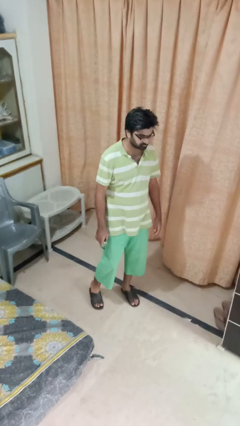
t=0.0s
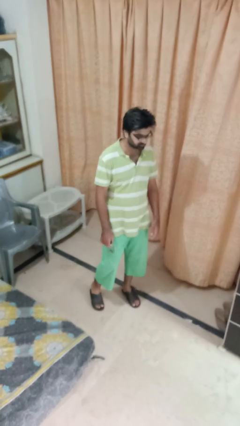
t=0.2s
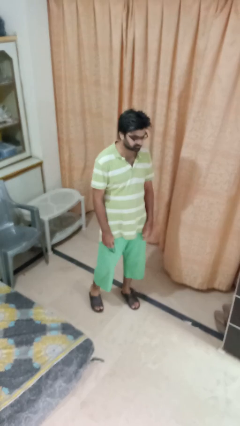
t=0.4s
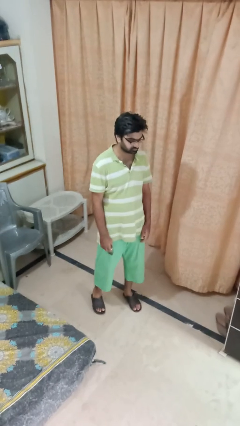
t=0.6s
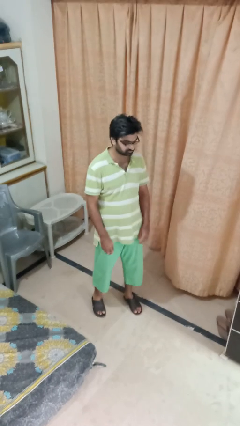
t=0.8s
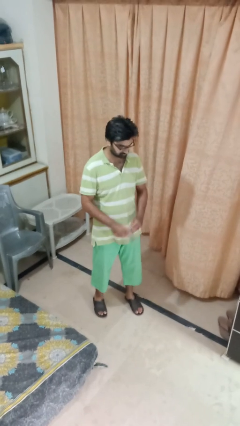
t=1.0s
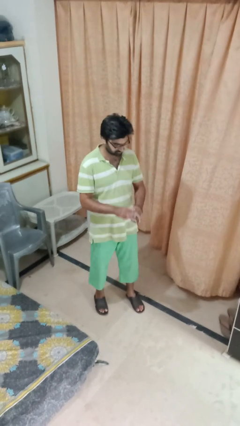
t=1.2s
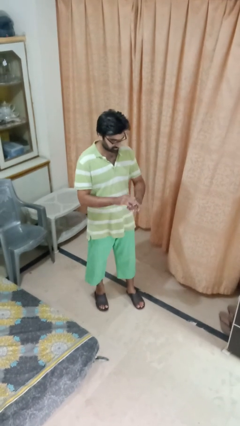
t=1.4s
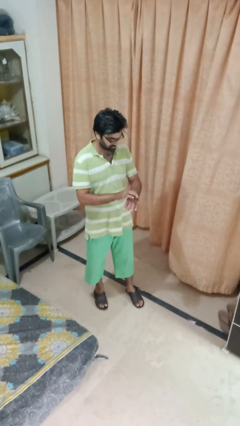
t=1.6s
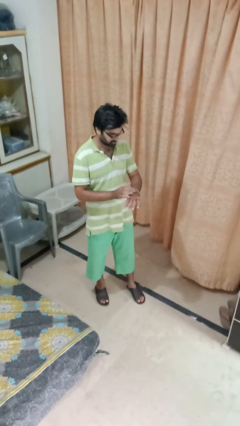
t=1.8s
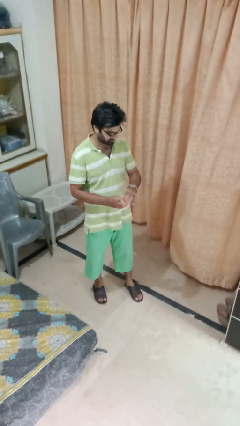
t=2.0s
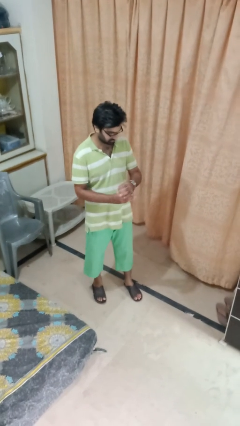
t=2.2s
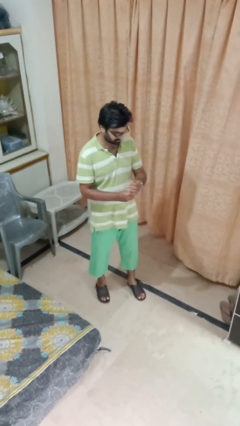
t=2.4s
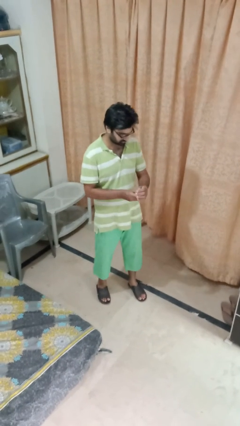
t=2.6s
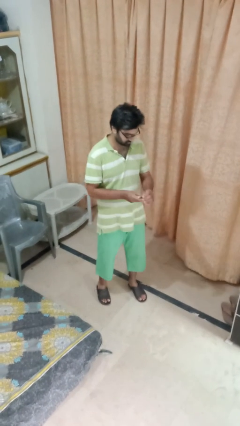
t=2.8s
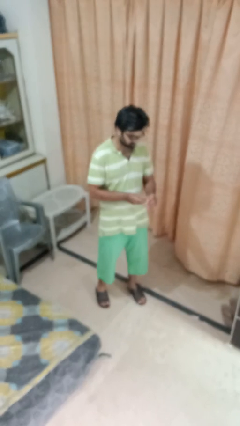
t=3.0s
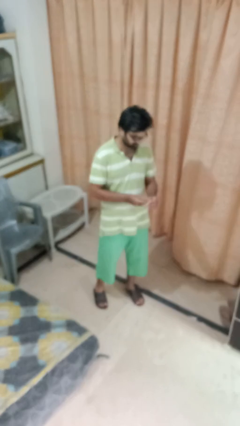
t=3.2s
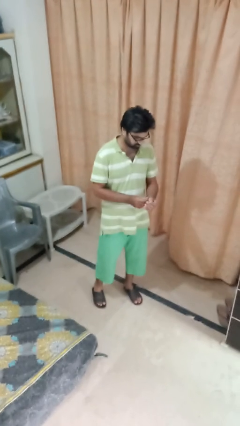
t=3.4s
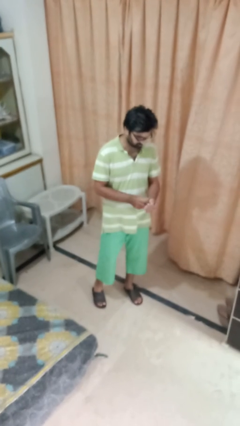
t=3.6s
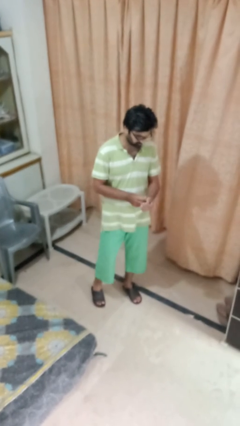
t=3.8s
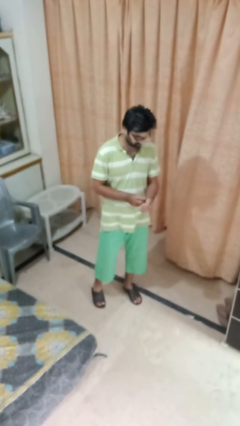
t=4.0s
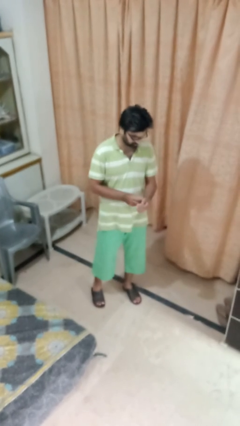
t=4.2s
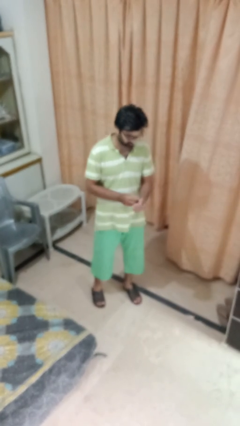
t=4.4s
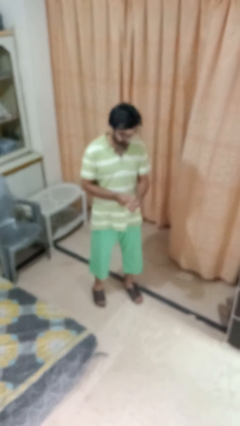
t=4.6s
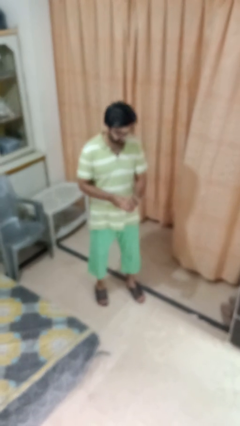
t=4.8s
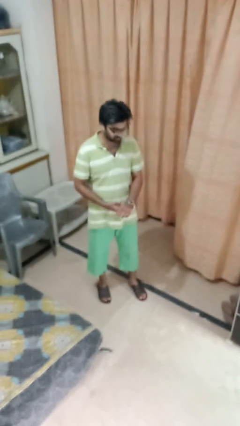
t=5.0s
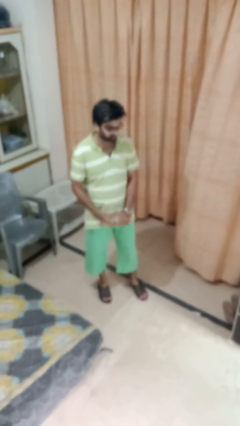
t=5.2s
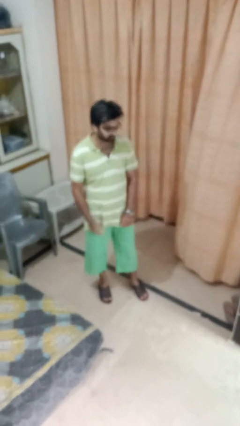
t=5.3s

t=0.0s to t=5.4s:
person puts on wristwatch

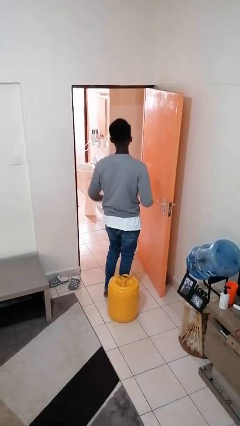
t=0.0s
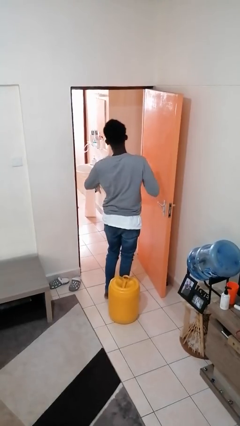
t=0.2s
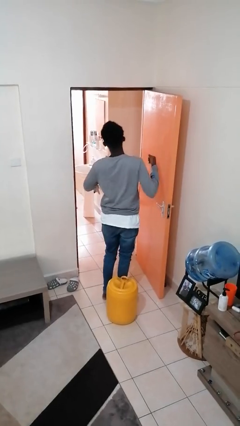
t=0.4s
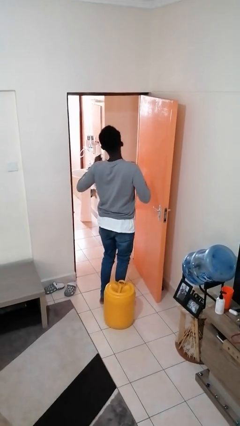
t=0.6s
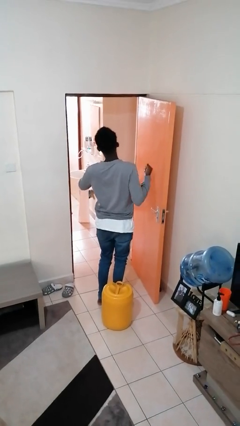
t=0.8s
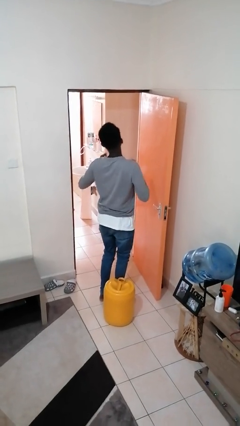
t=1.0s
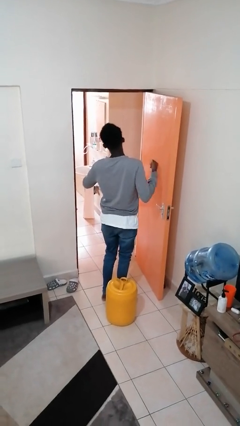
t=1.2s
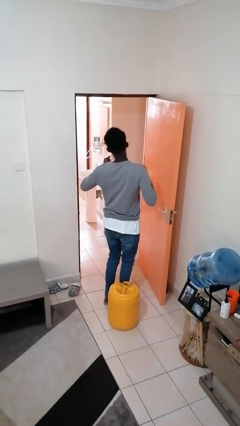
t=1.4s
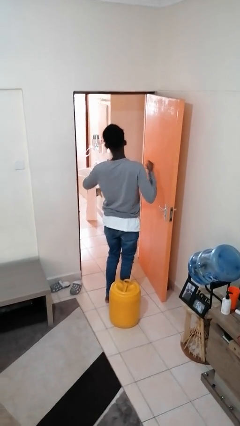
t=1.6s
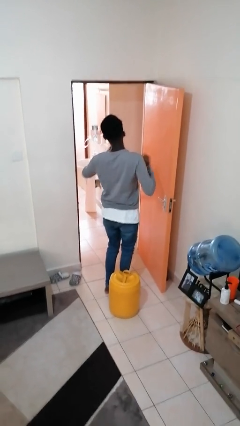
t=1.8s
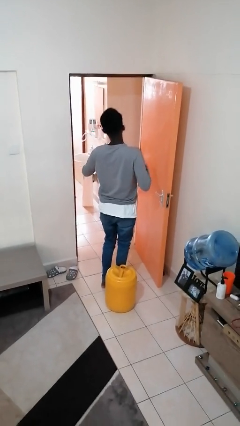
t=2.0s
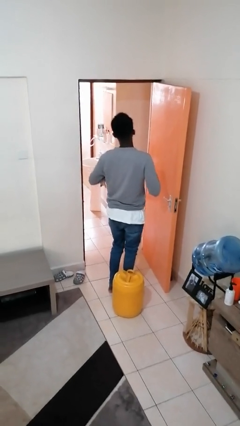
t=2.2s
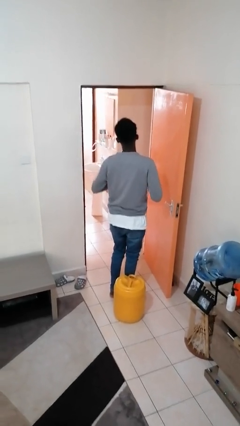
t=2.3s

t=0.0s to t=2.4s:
person drums on chest

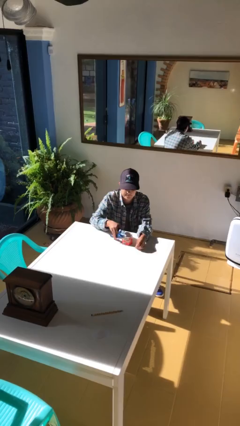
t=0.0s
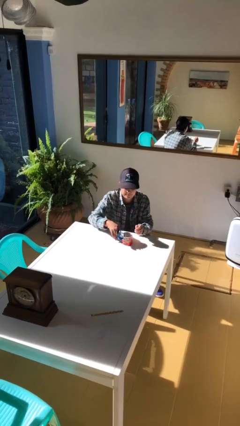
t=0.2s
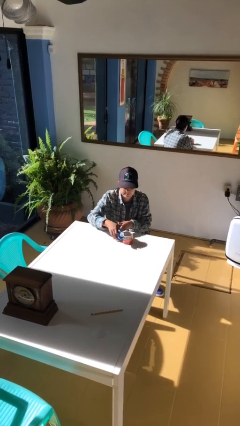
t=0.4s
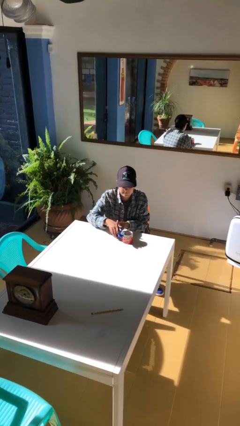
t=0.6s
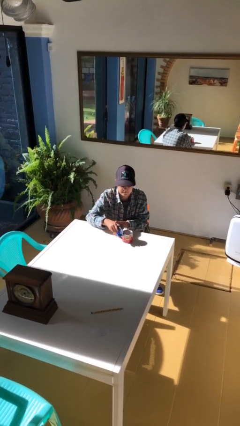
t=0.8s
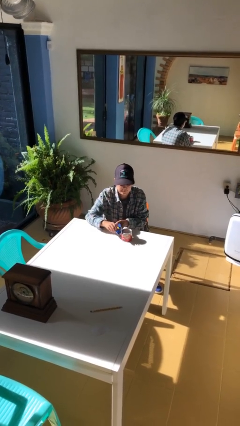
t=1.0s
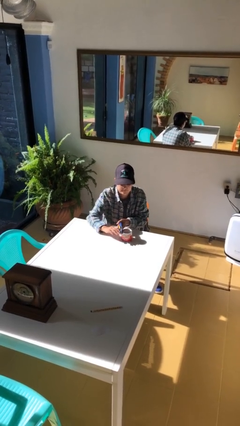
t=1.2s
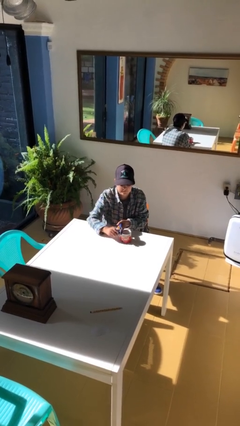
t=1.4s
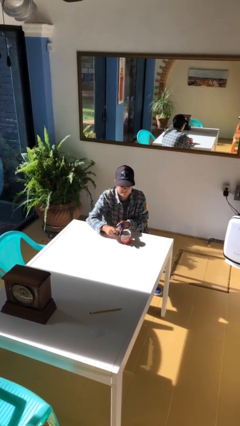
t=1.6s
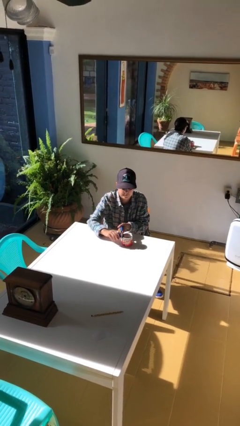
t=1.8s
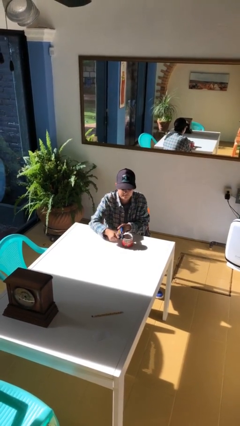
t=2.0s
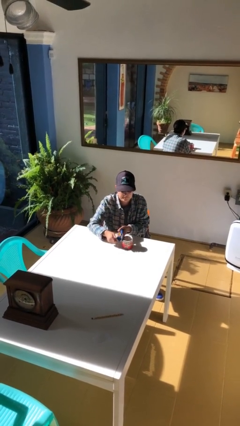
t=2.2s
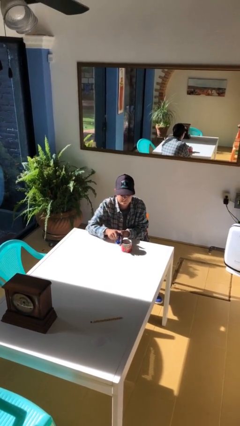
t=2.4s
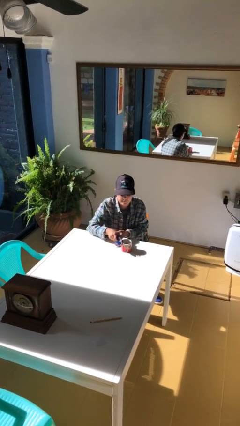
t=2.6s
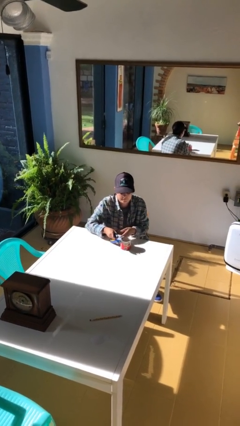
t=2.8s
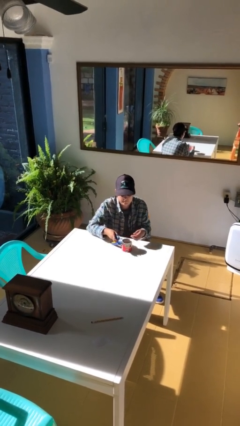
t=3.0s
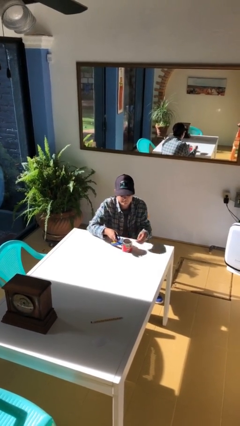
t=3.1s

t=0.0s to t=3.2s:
person opens can with can opener

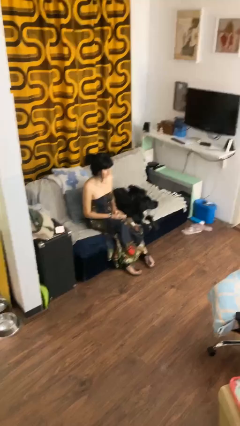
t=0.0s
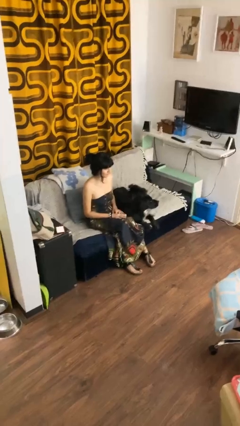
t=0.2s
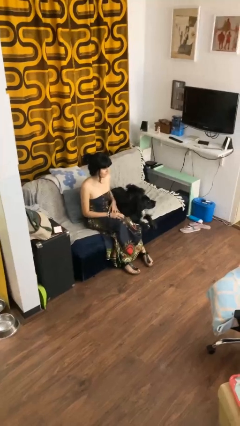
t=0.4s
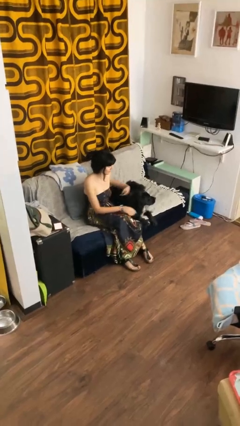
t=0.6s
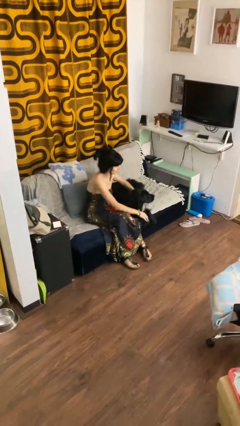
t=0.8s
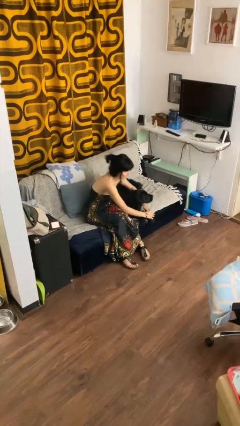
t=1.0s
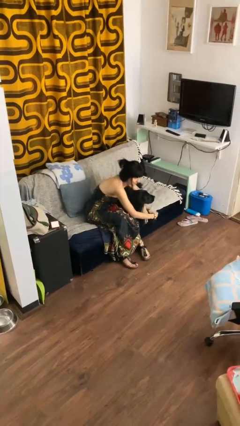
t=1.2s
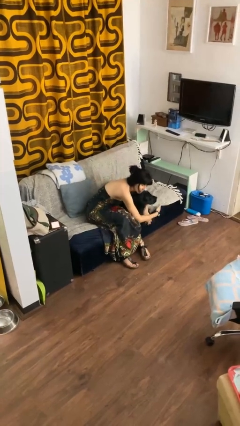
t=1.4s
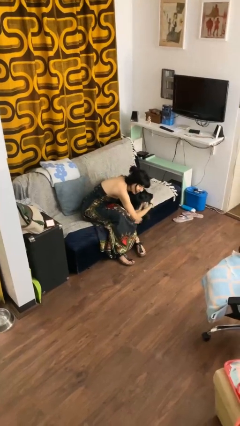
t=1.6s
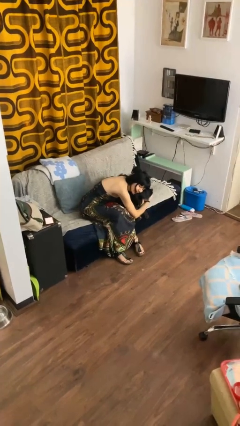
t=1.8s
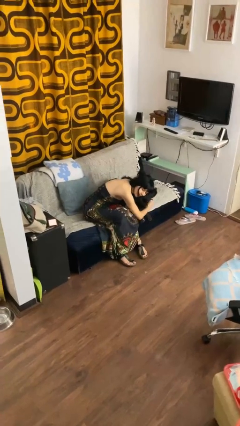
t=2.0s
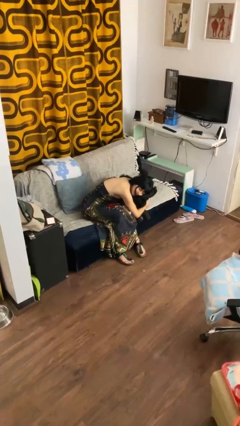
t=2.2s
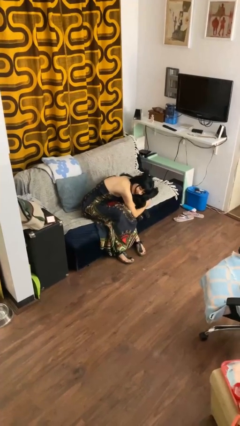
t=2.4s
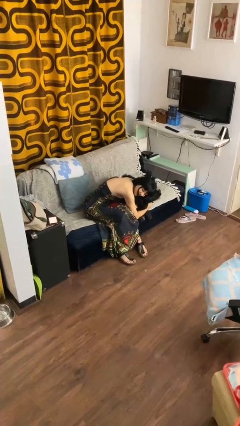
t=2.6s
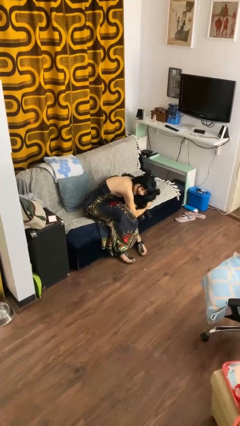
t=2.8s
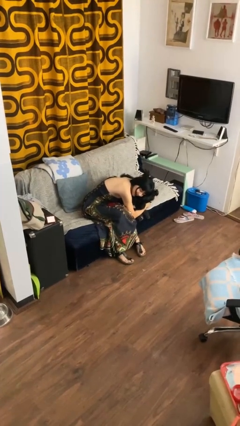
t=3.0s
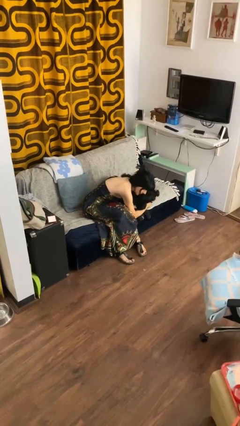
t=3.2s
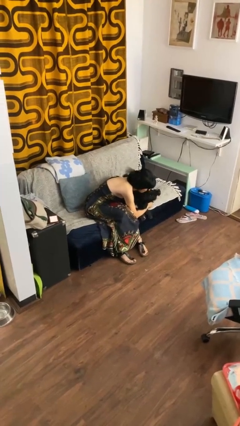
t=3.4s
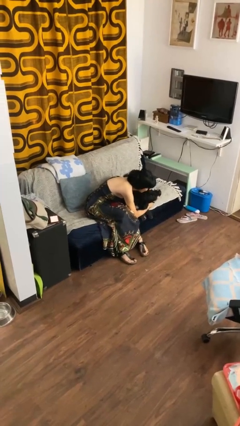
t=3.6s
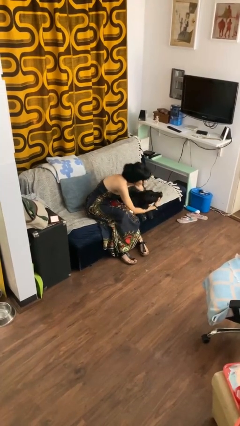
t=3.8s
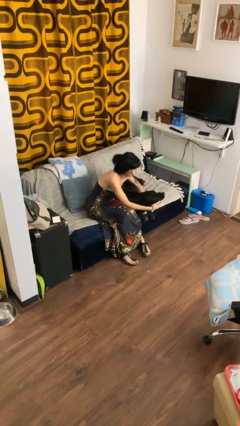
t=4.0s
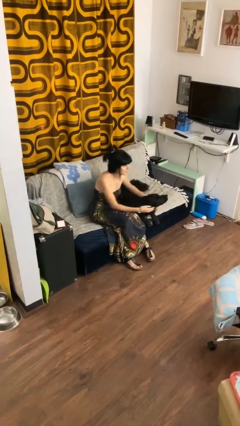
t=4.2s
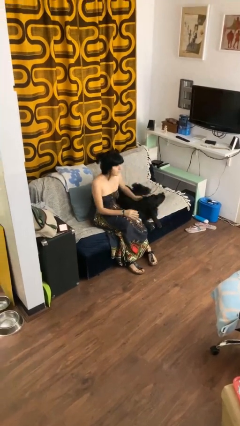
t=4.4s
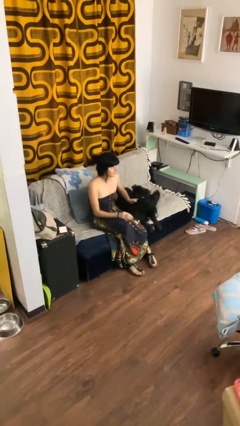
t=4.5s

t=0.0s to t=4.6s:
person hugs dog

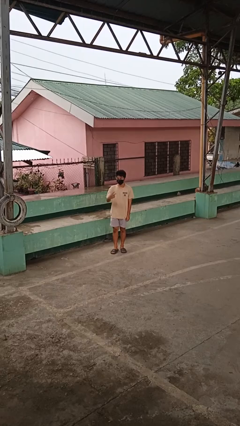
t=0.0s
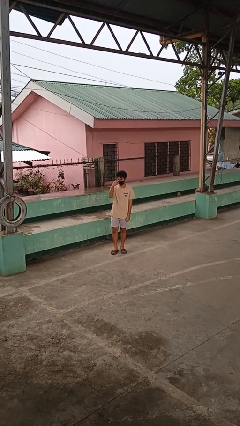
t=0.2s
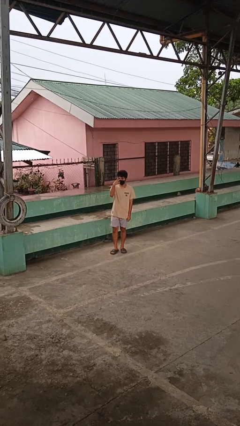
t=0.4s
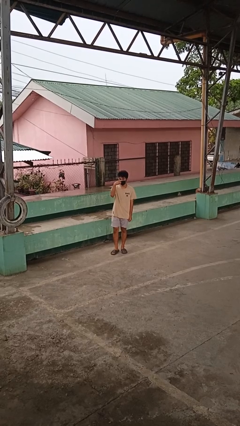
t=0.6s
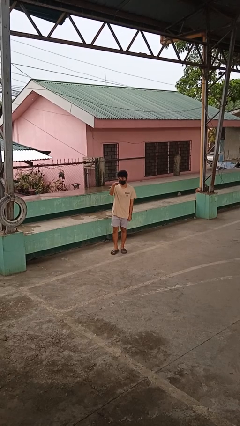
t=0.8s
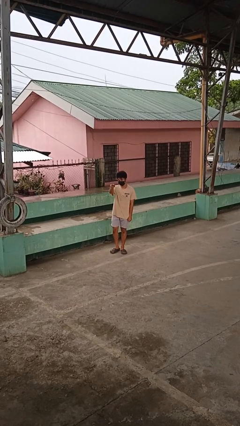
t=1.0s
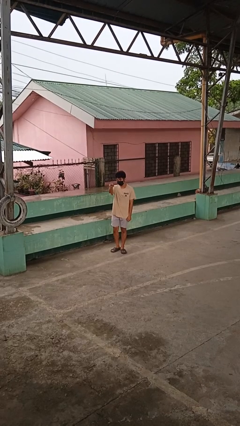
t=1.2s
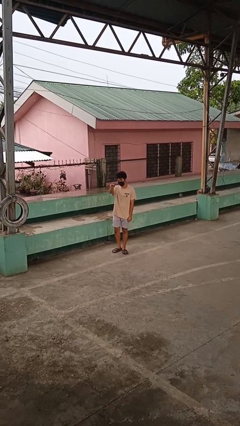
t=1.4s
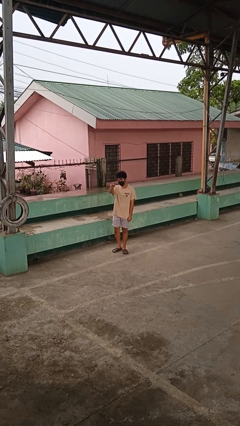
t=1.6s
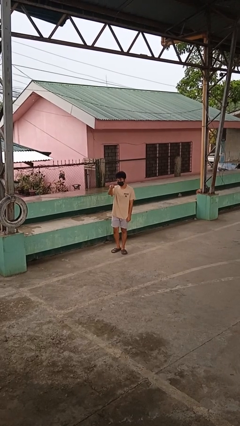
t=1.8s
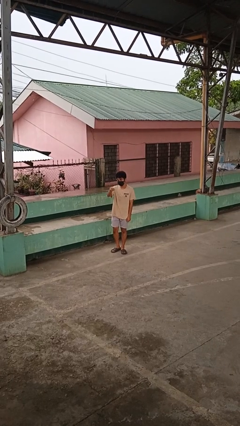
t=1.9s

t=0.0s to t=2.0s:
person gestures watch closely
